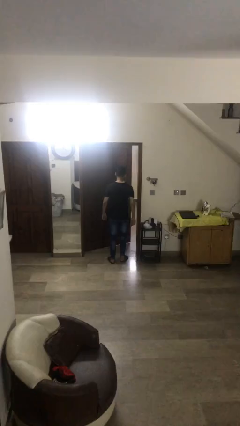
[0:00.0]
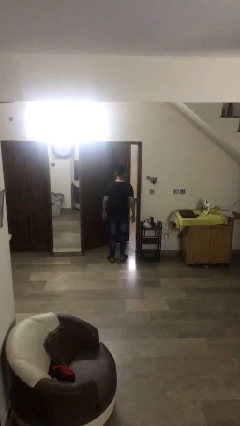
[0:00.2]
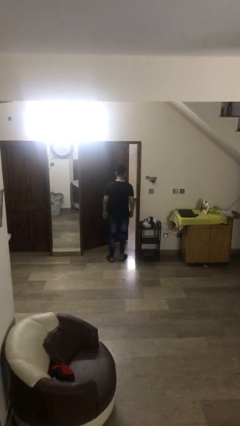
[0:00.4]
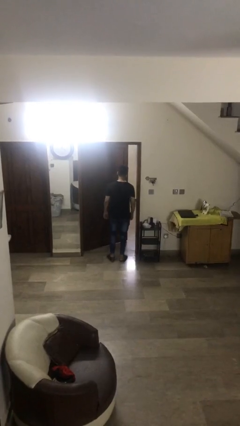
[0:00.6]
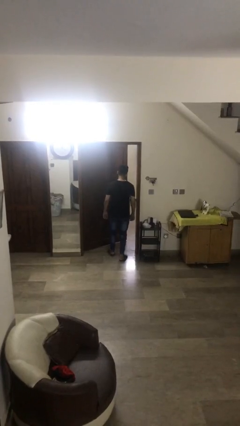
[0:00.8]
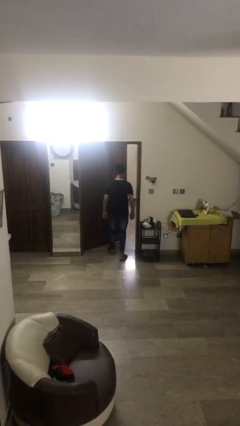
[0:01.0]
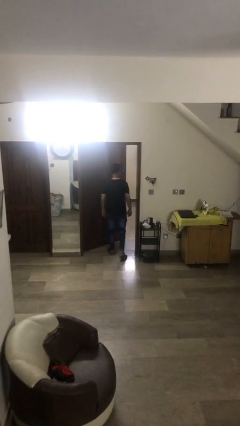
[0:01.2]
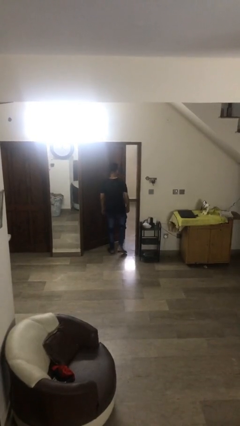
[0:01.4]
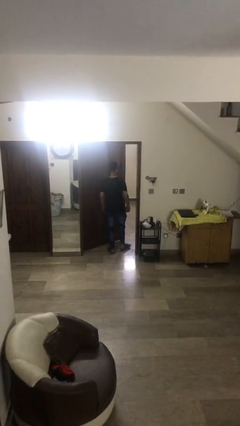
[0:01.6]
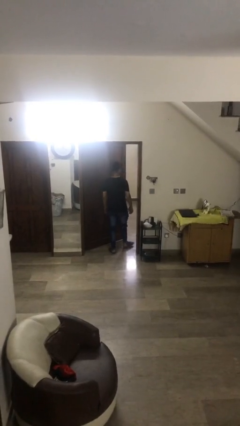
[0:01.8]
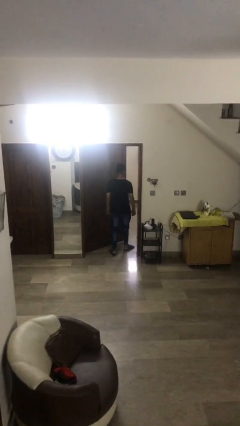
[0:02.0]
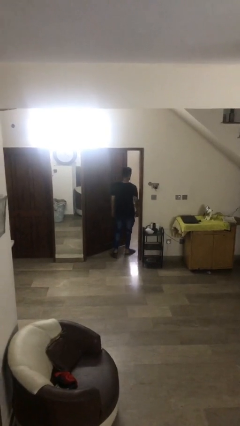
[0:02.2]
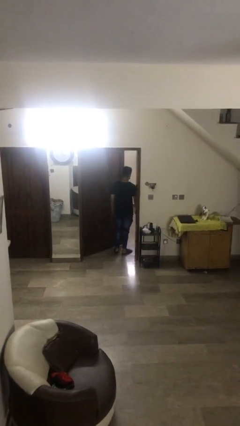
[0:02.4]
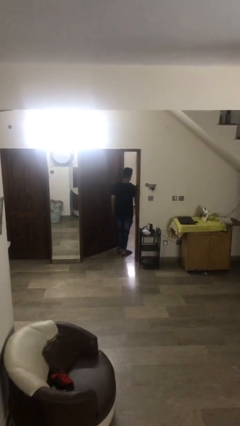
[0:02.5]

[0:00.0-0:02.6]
person exits scene through structure

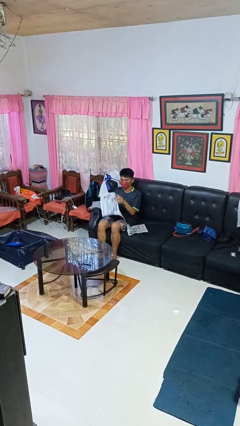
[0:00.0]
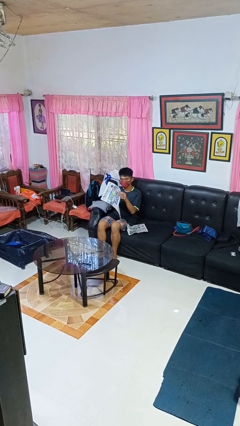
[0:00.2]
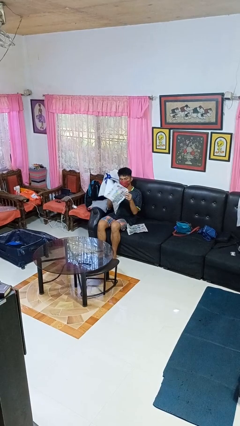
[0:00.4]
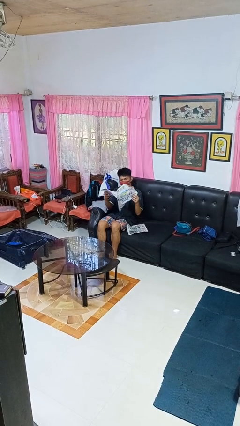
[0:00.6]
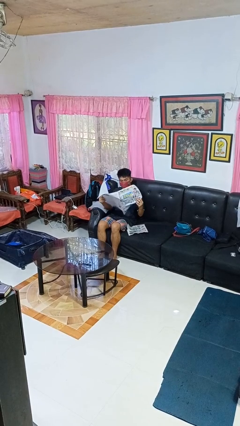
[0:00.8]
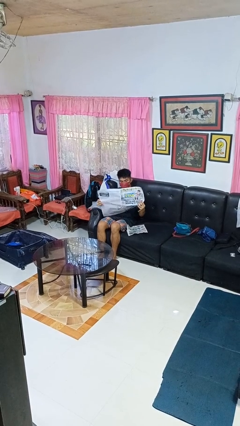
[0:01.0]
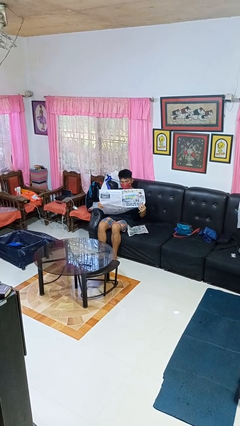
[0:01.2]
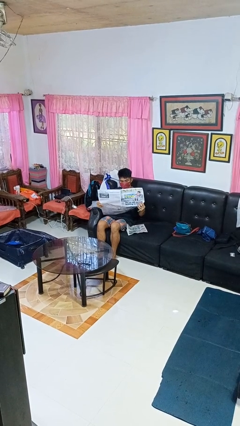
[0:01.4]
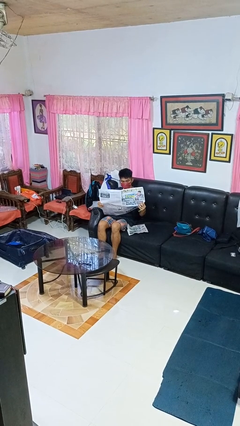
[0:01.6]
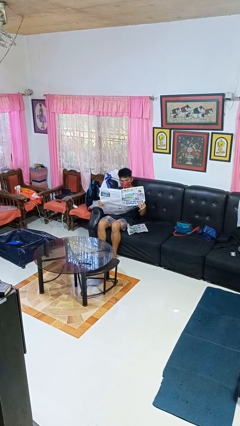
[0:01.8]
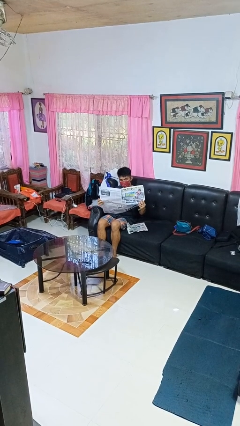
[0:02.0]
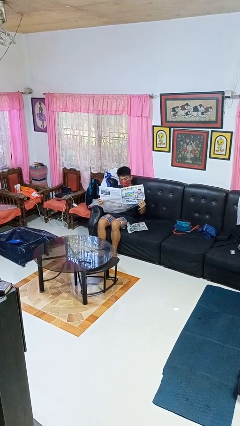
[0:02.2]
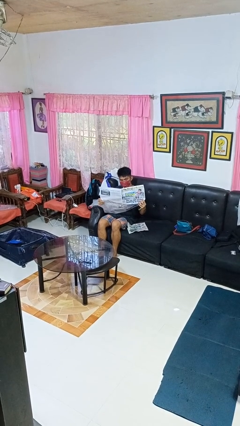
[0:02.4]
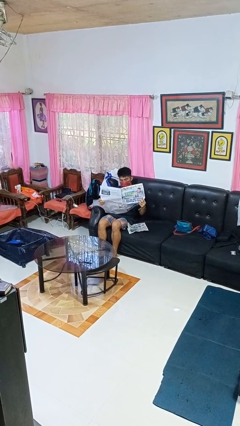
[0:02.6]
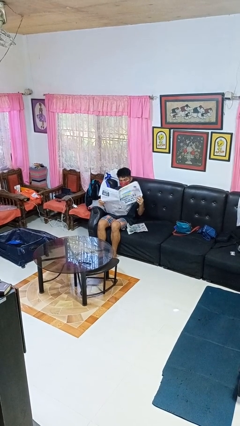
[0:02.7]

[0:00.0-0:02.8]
person reads newspaper

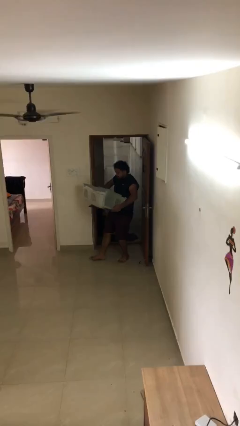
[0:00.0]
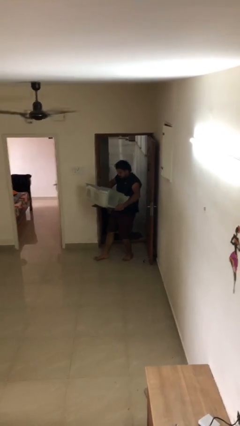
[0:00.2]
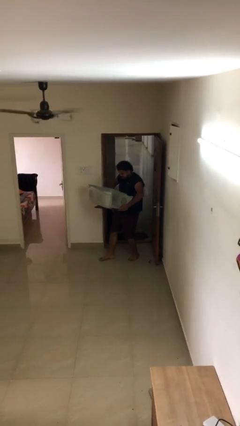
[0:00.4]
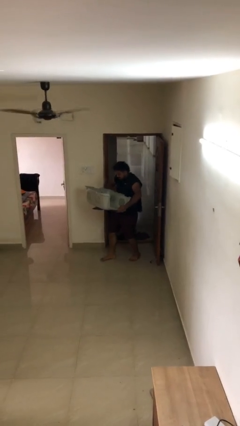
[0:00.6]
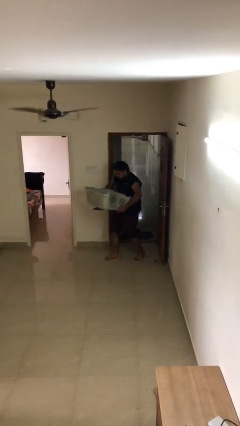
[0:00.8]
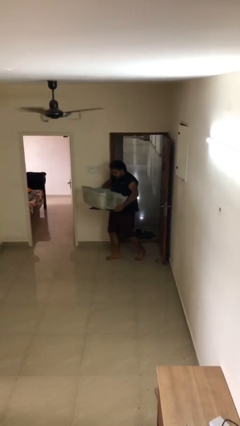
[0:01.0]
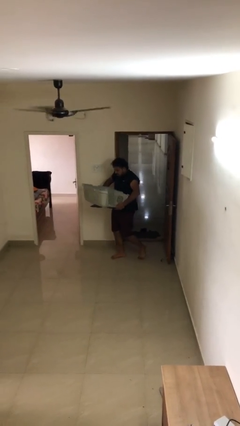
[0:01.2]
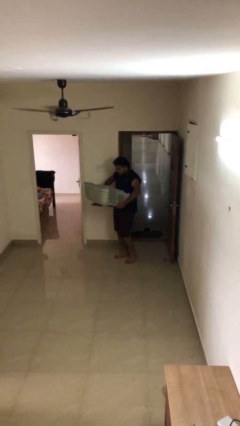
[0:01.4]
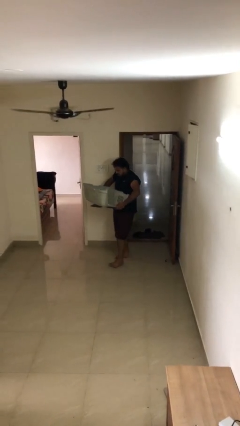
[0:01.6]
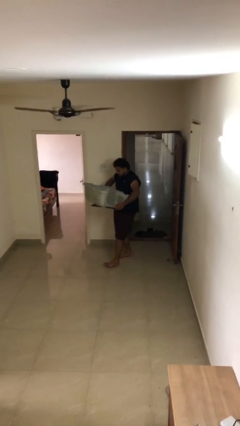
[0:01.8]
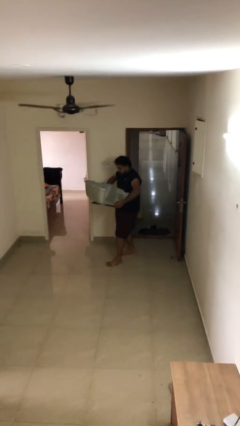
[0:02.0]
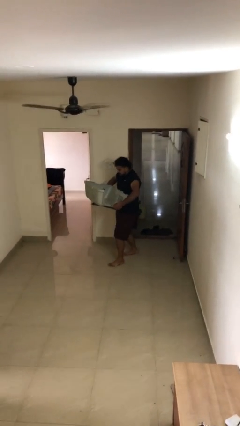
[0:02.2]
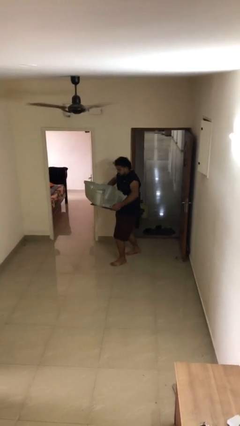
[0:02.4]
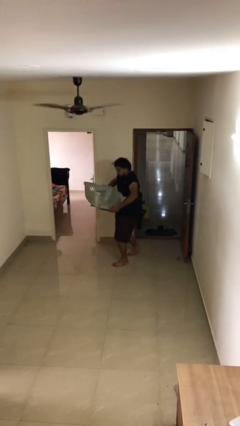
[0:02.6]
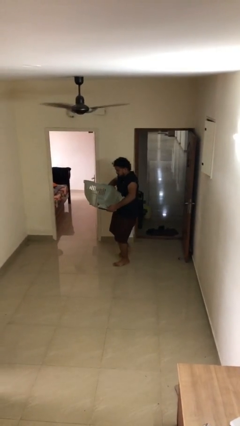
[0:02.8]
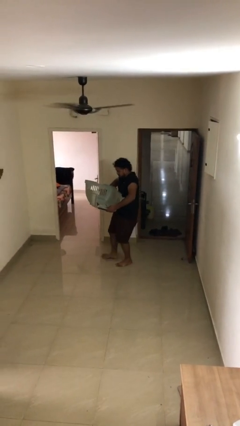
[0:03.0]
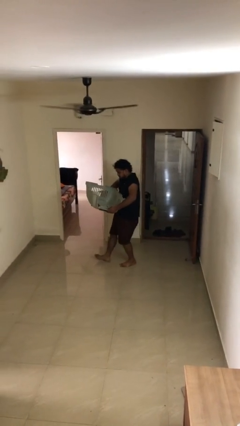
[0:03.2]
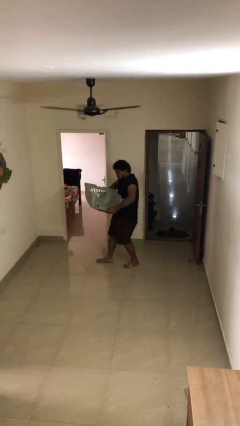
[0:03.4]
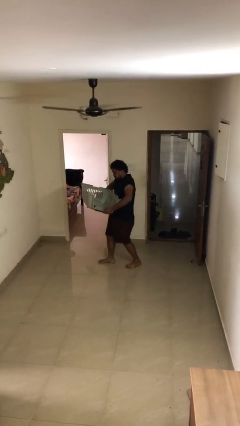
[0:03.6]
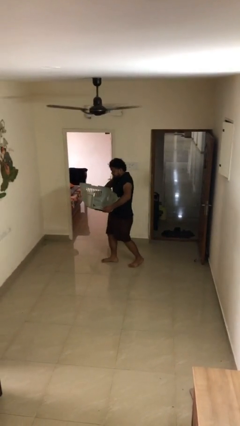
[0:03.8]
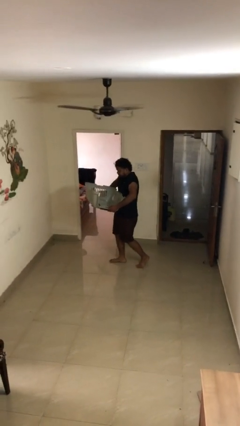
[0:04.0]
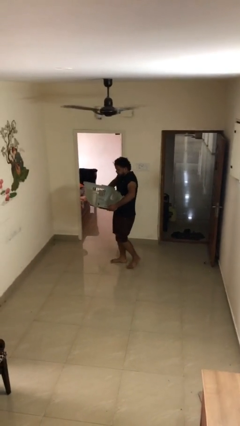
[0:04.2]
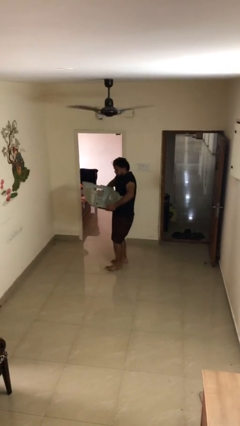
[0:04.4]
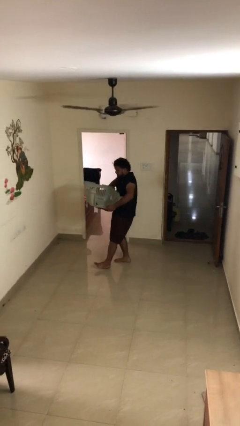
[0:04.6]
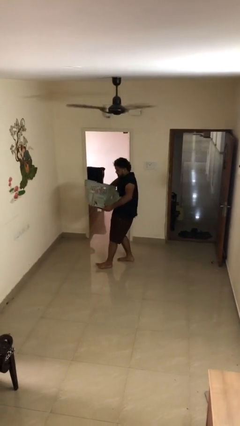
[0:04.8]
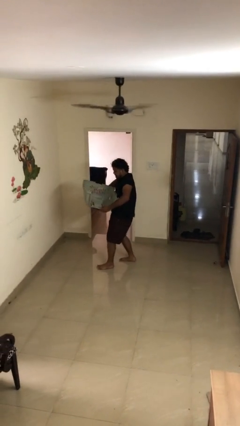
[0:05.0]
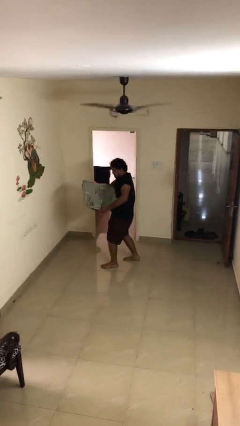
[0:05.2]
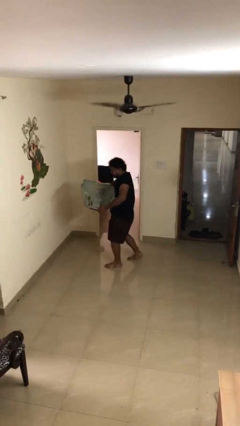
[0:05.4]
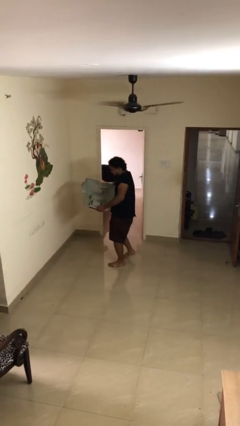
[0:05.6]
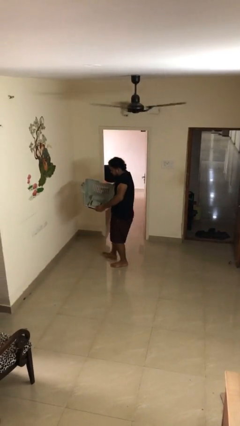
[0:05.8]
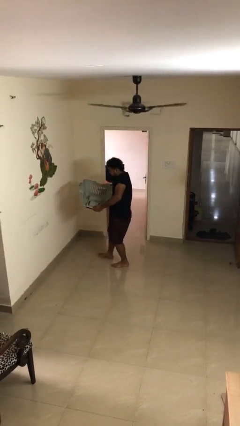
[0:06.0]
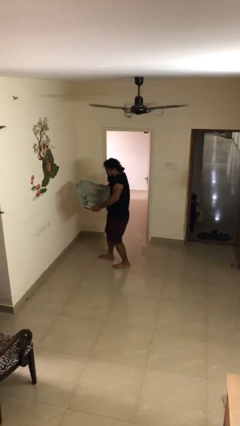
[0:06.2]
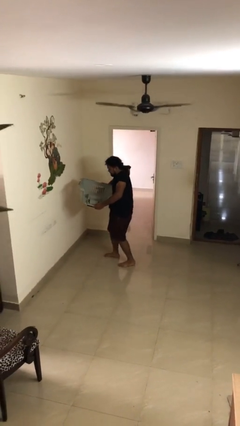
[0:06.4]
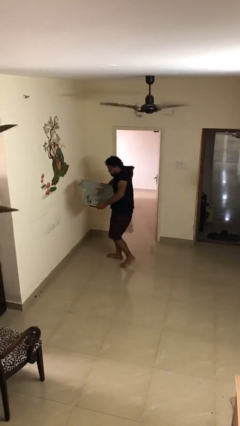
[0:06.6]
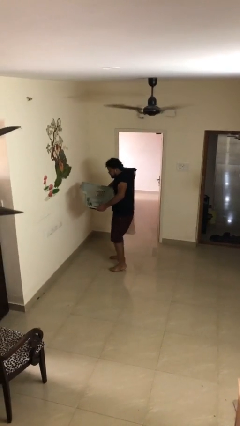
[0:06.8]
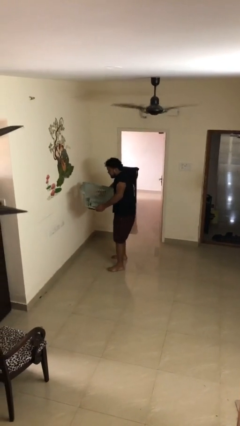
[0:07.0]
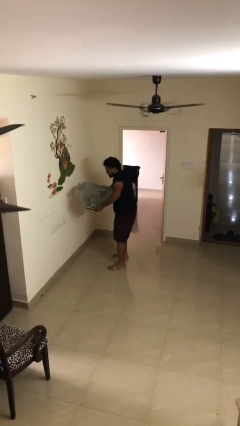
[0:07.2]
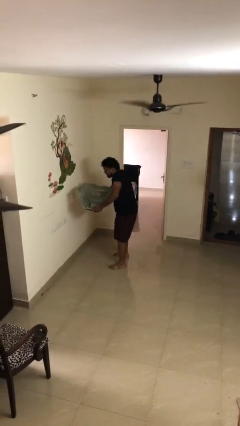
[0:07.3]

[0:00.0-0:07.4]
person carries heavy object

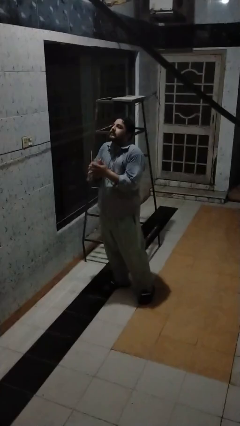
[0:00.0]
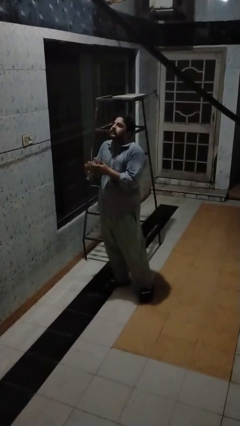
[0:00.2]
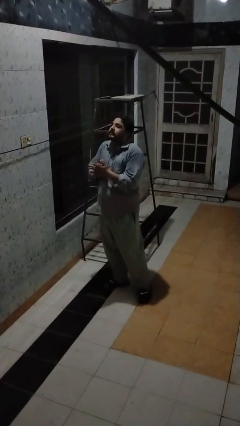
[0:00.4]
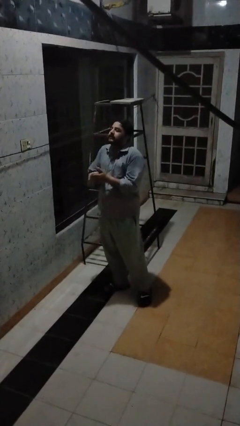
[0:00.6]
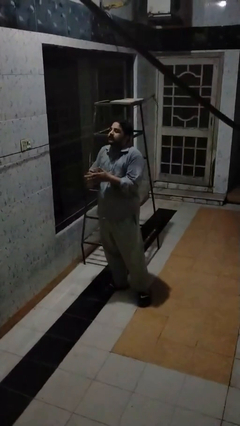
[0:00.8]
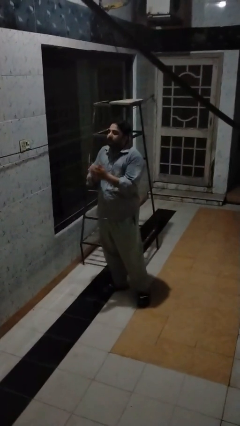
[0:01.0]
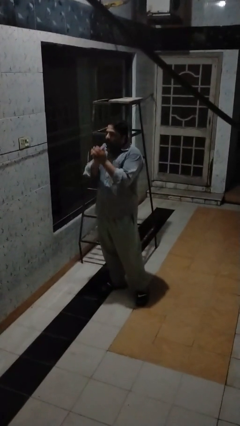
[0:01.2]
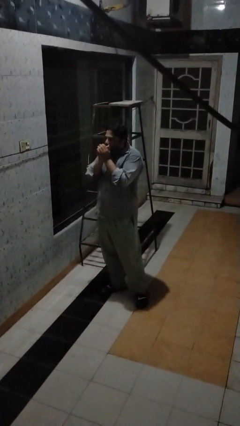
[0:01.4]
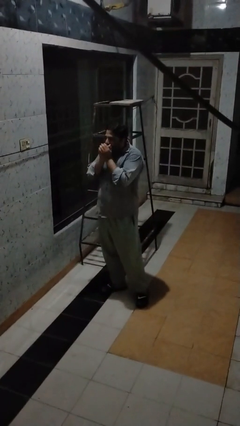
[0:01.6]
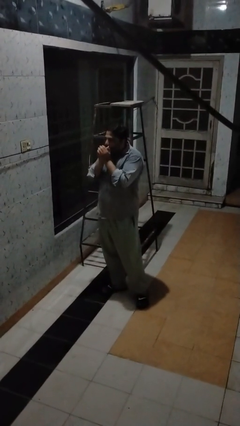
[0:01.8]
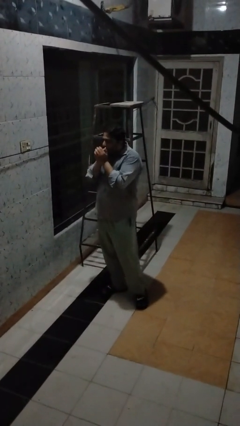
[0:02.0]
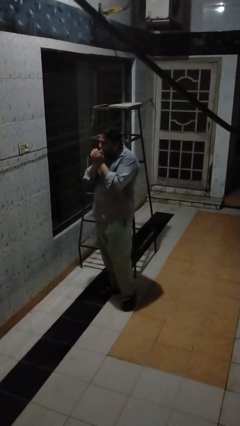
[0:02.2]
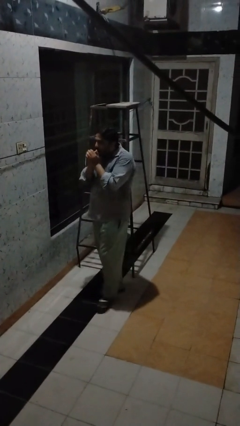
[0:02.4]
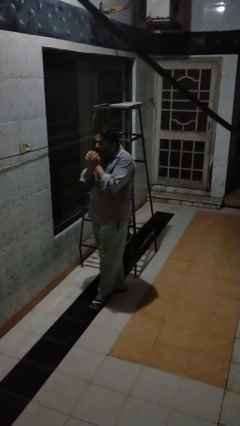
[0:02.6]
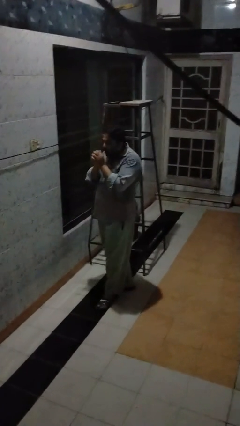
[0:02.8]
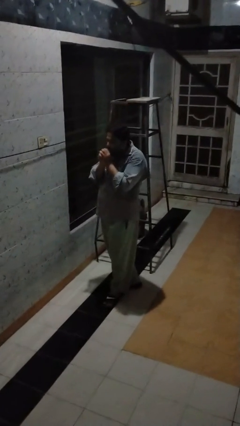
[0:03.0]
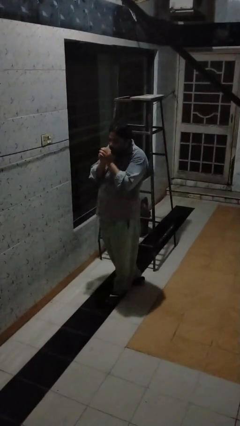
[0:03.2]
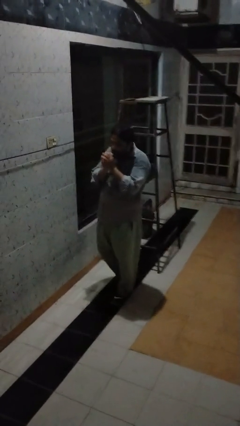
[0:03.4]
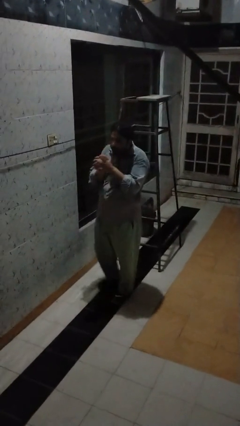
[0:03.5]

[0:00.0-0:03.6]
person blows into hands

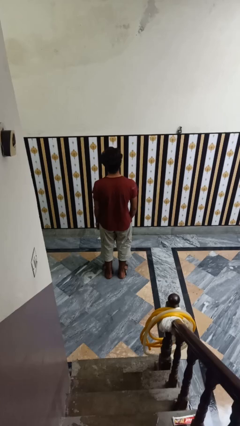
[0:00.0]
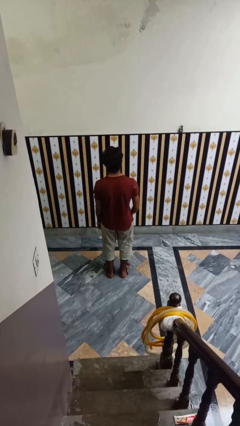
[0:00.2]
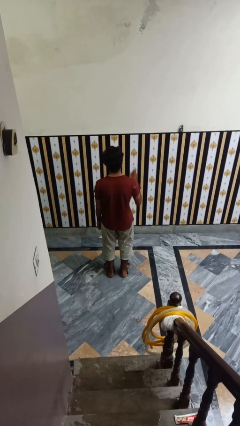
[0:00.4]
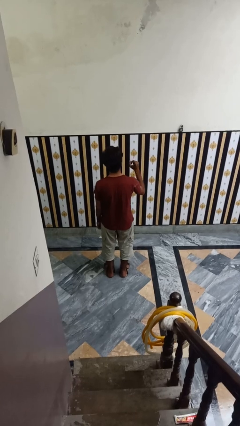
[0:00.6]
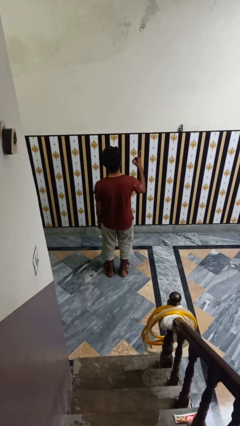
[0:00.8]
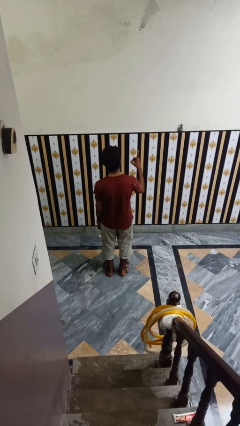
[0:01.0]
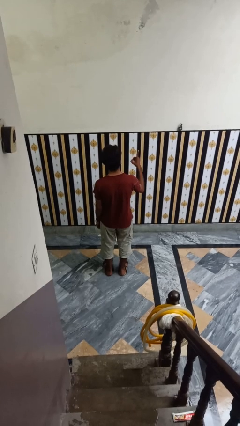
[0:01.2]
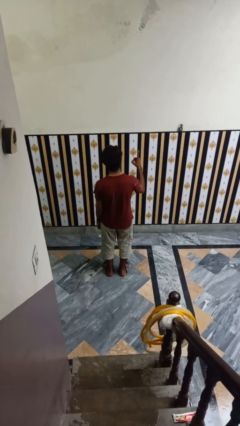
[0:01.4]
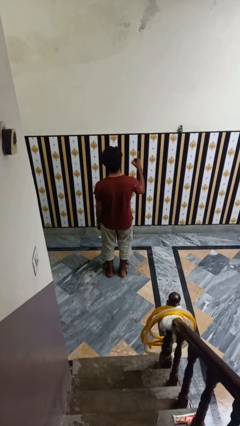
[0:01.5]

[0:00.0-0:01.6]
person gestures number one
